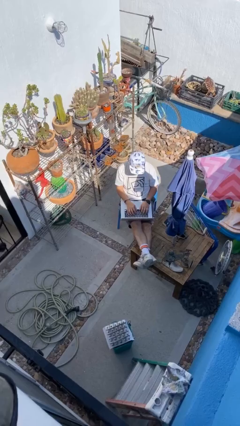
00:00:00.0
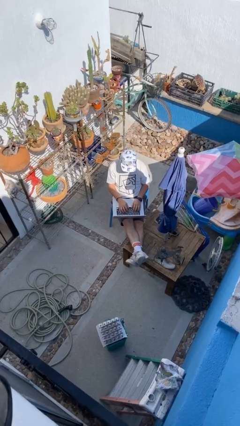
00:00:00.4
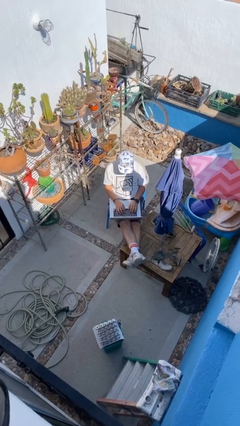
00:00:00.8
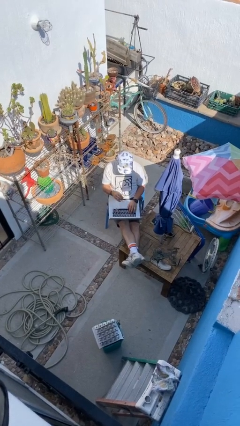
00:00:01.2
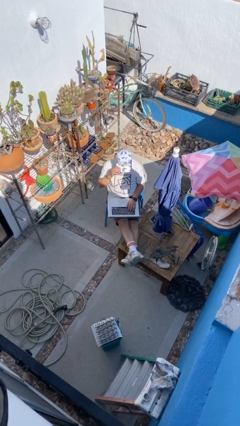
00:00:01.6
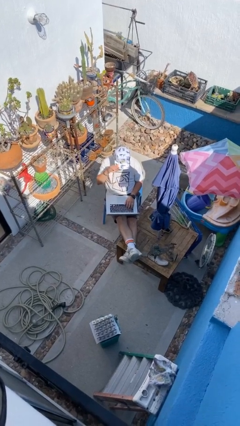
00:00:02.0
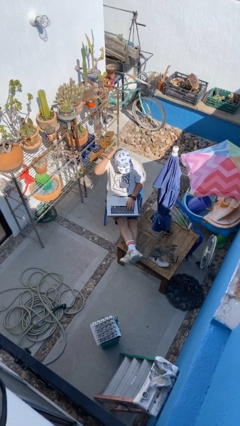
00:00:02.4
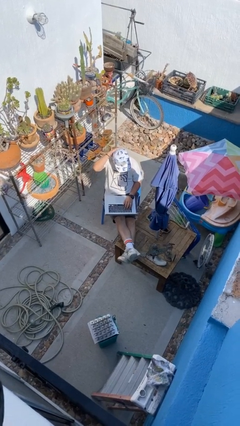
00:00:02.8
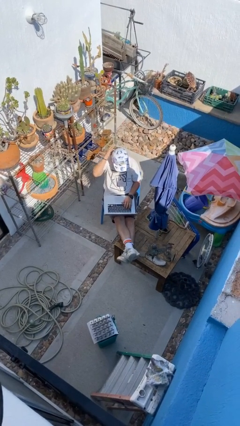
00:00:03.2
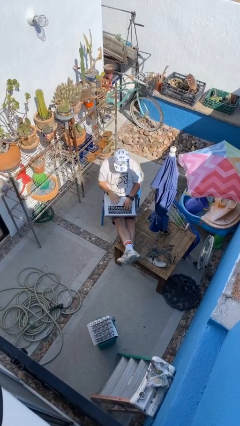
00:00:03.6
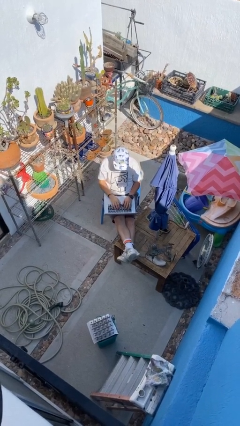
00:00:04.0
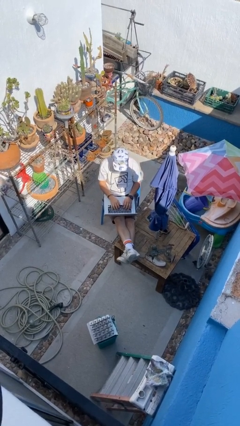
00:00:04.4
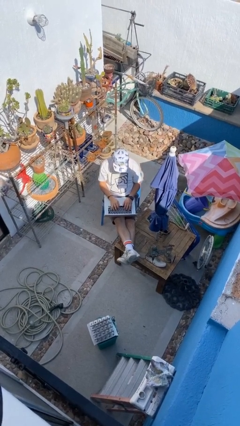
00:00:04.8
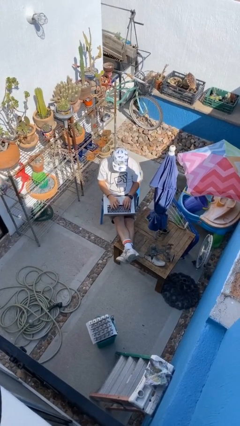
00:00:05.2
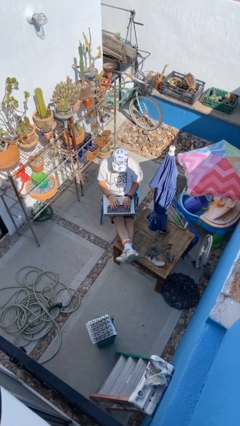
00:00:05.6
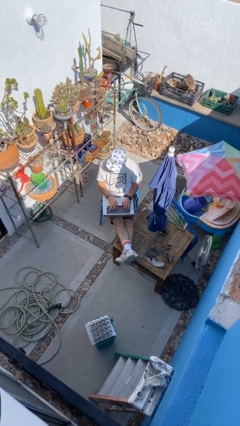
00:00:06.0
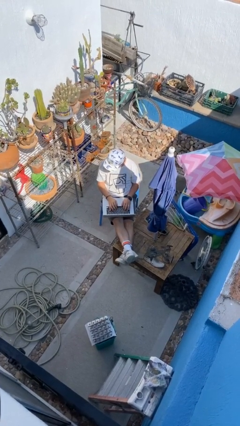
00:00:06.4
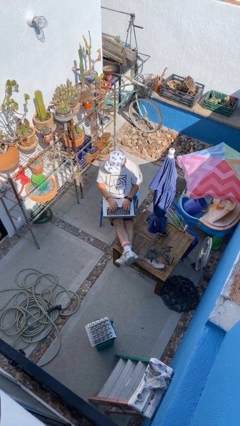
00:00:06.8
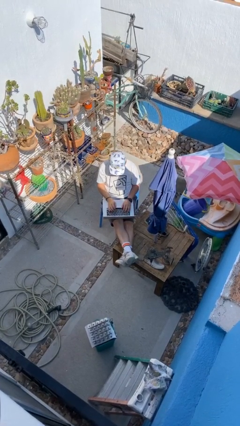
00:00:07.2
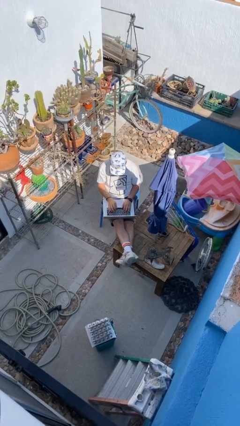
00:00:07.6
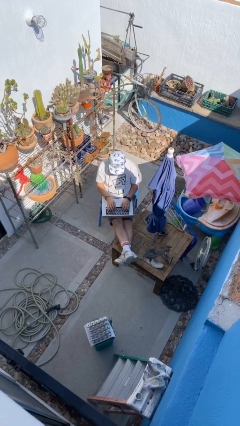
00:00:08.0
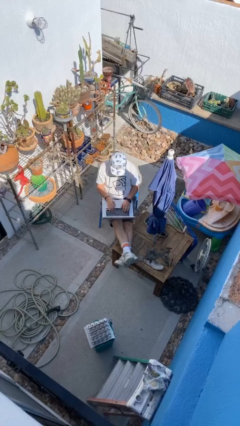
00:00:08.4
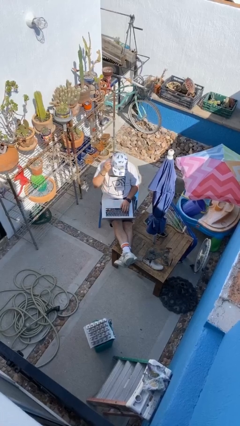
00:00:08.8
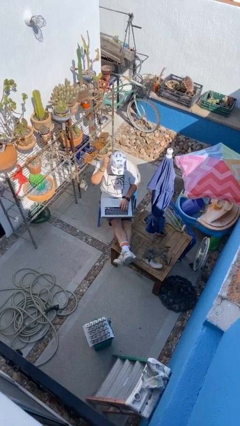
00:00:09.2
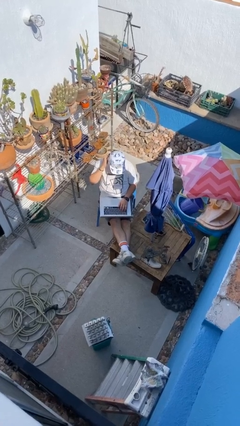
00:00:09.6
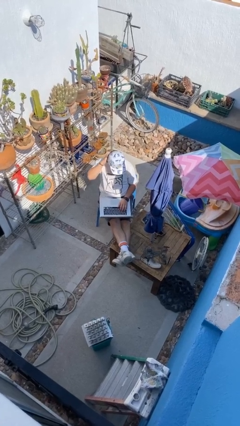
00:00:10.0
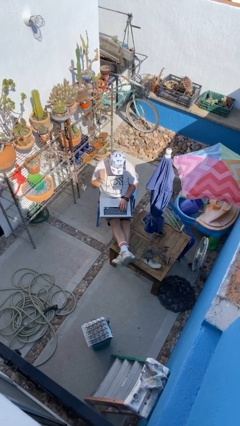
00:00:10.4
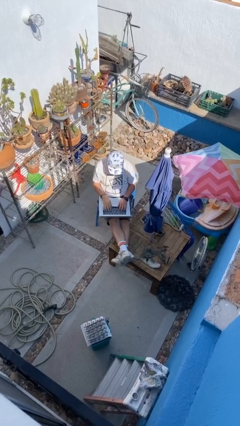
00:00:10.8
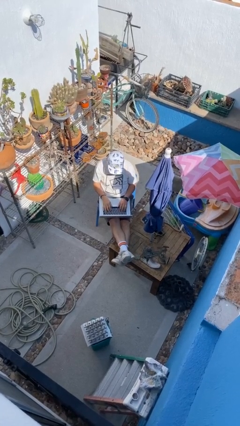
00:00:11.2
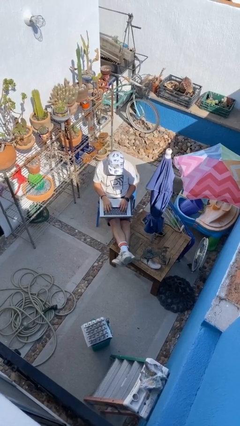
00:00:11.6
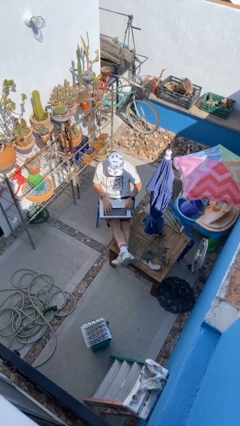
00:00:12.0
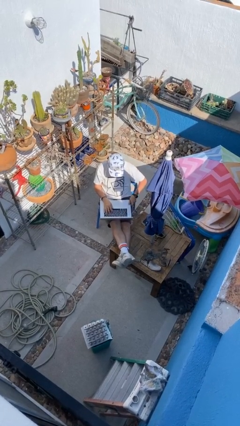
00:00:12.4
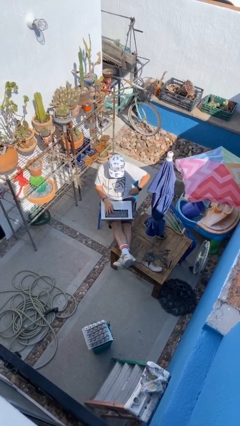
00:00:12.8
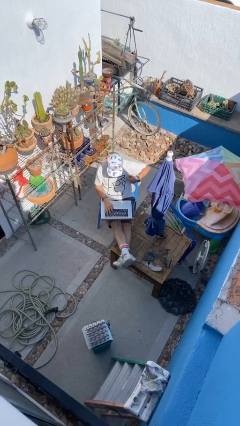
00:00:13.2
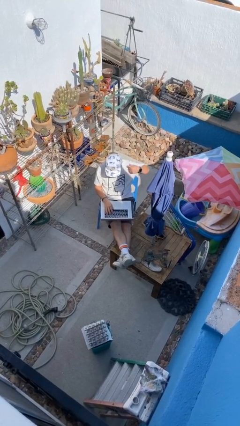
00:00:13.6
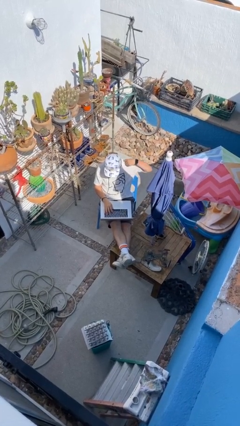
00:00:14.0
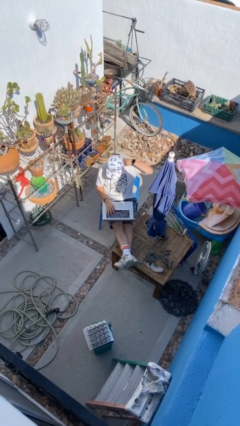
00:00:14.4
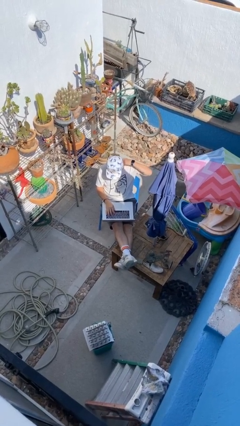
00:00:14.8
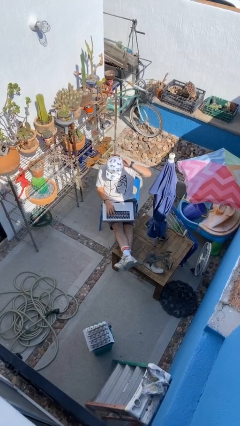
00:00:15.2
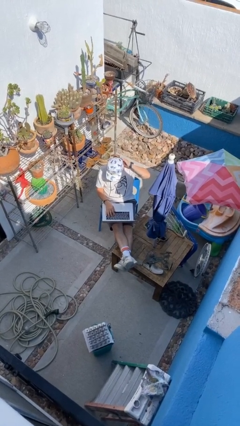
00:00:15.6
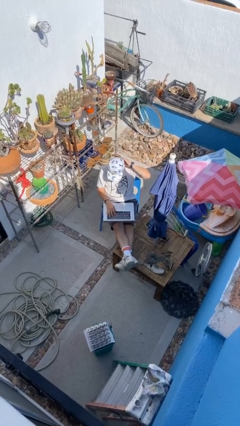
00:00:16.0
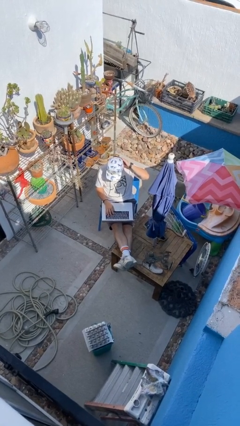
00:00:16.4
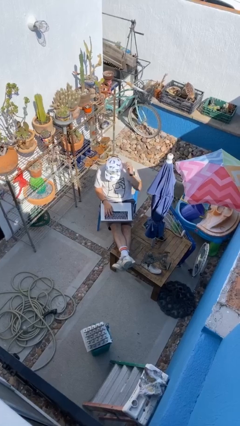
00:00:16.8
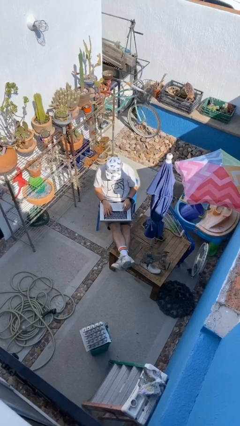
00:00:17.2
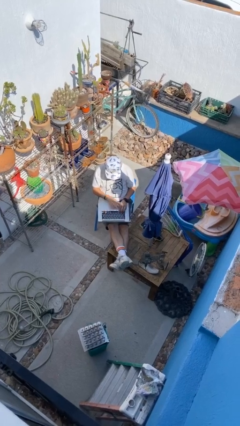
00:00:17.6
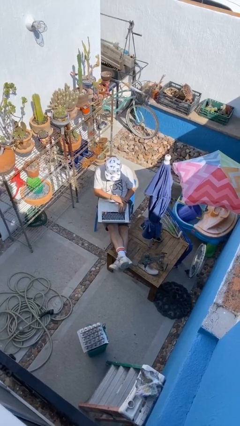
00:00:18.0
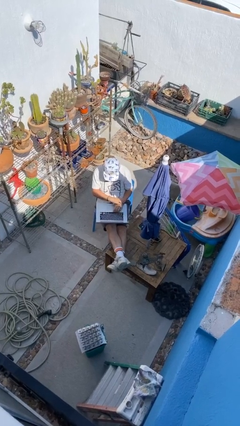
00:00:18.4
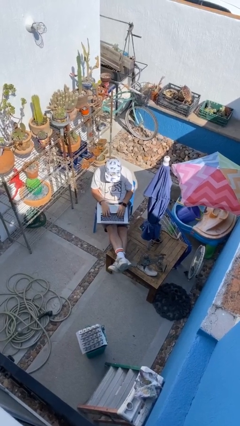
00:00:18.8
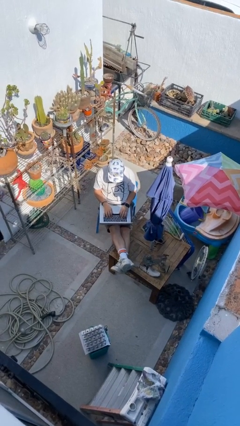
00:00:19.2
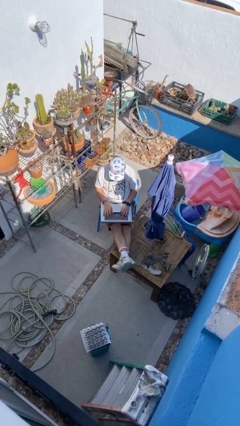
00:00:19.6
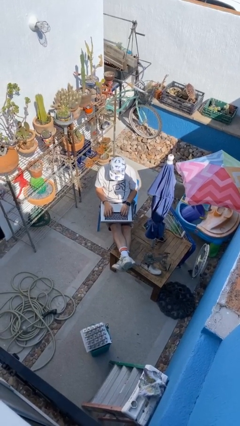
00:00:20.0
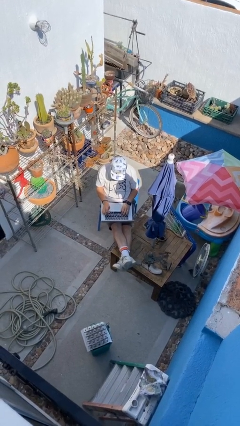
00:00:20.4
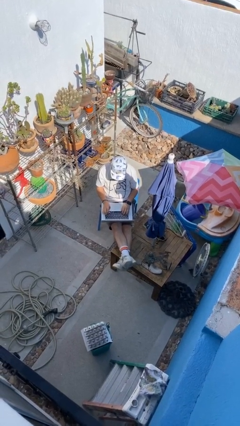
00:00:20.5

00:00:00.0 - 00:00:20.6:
person interacts with laptop

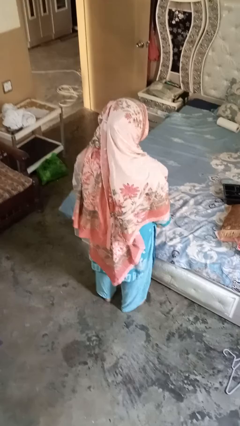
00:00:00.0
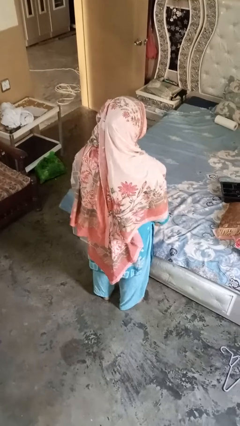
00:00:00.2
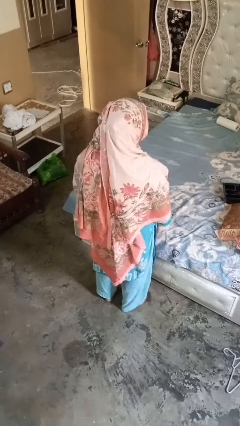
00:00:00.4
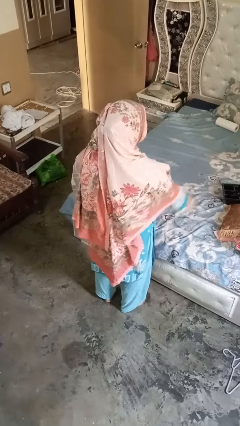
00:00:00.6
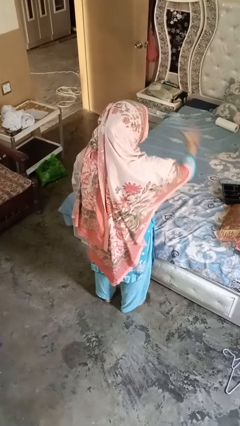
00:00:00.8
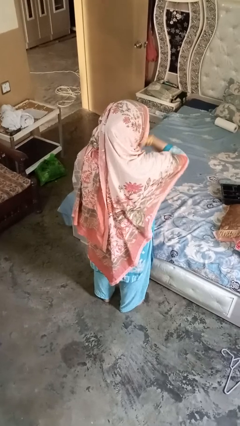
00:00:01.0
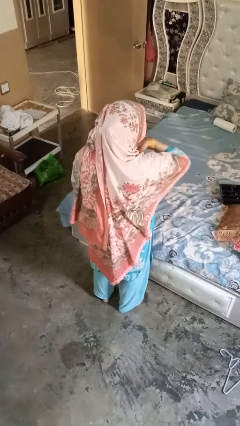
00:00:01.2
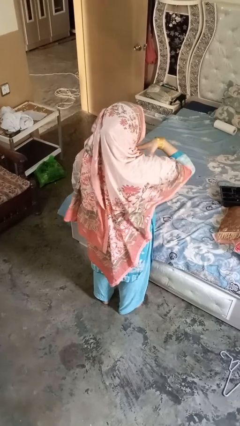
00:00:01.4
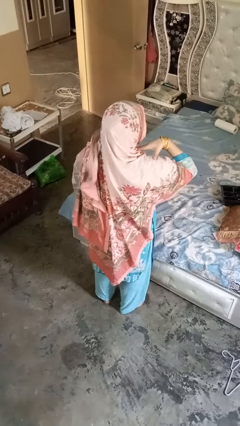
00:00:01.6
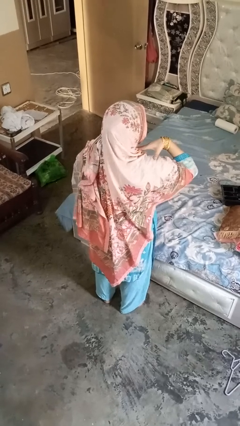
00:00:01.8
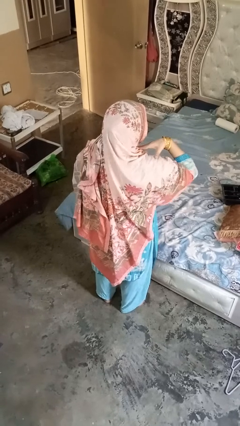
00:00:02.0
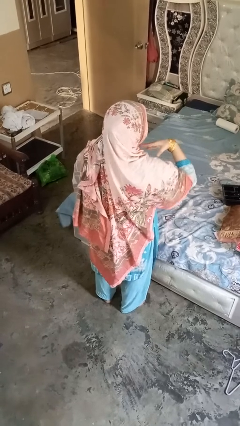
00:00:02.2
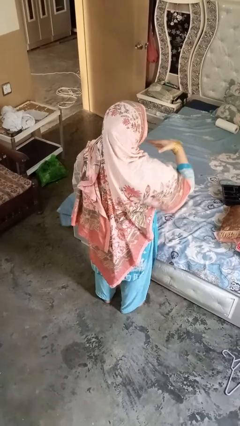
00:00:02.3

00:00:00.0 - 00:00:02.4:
person gestures cut

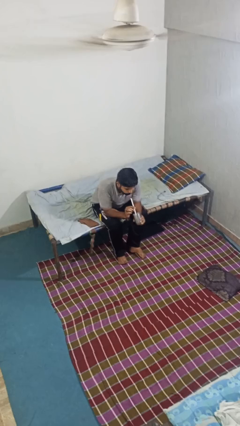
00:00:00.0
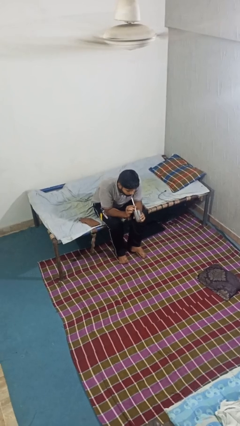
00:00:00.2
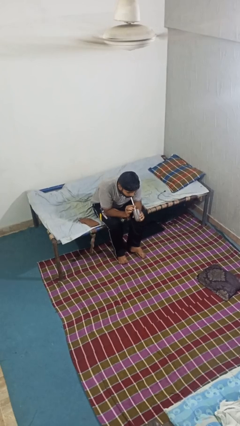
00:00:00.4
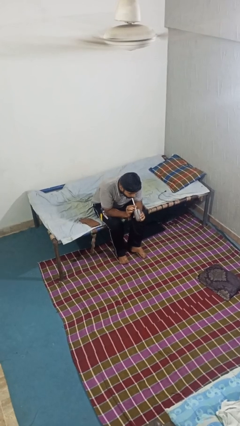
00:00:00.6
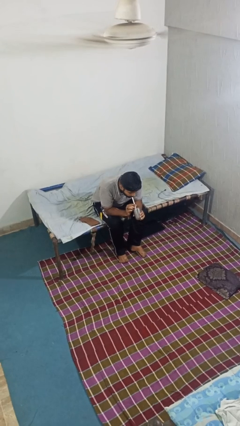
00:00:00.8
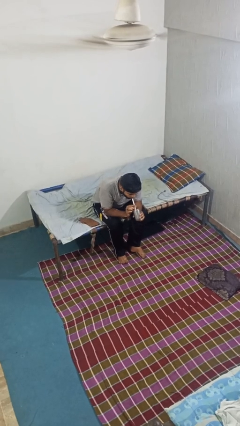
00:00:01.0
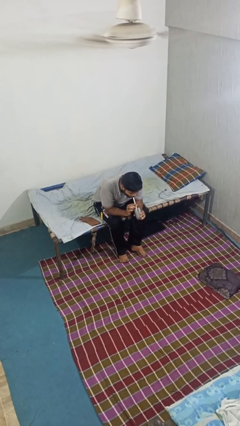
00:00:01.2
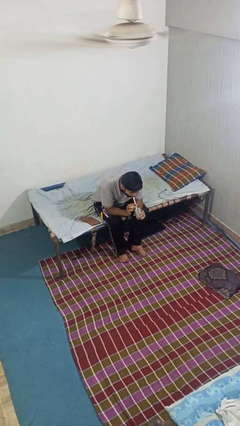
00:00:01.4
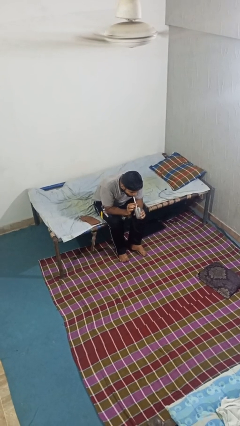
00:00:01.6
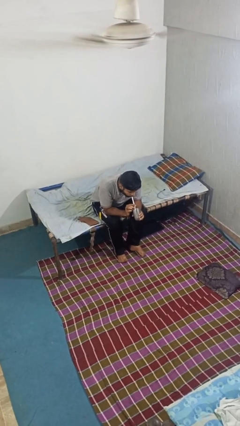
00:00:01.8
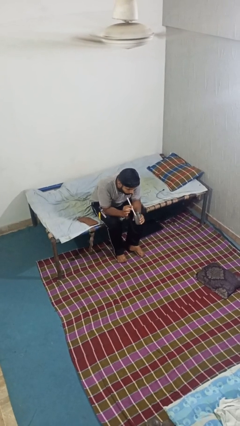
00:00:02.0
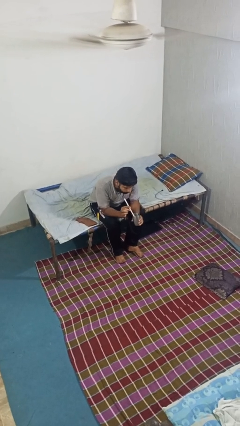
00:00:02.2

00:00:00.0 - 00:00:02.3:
person drinks from straw

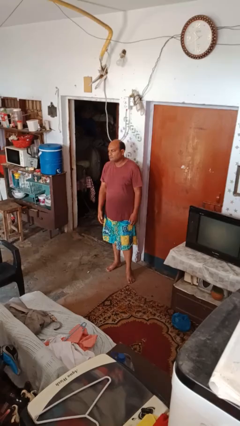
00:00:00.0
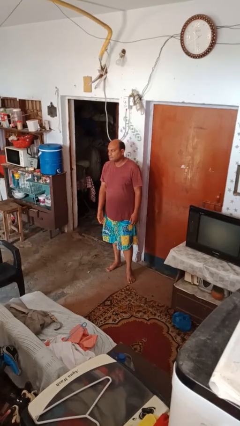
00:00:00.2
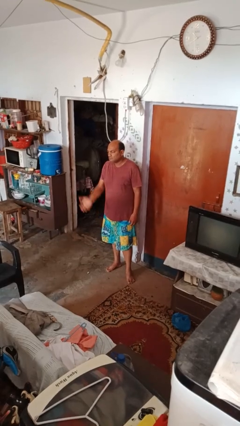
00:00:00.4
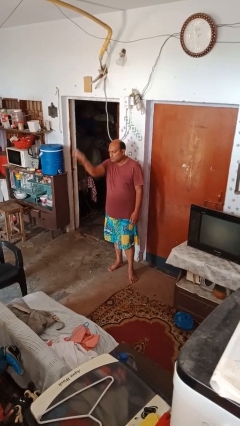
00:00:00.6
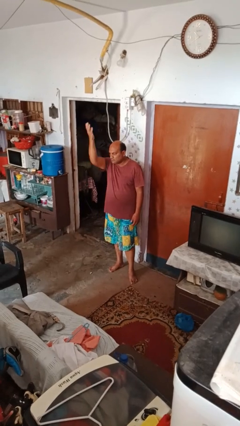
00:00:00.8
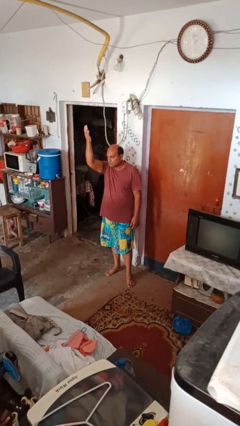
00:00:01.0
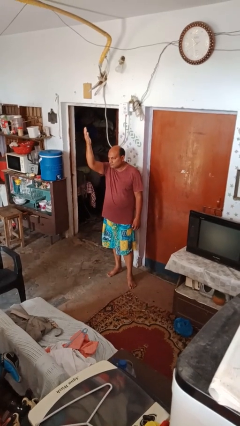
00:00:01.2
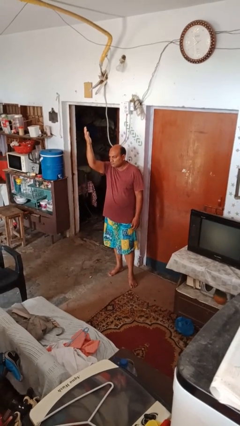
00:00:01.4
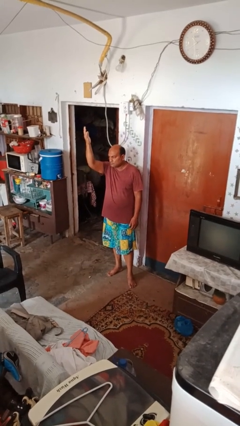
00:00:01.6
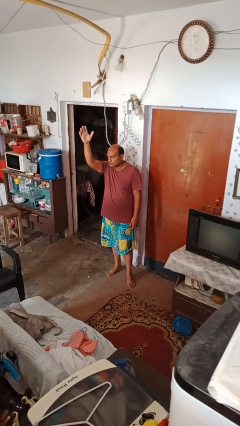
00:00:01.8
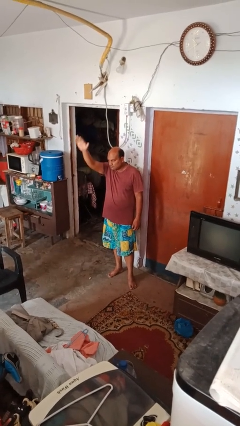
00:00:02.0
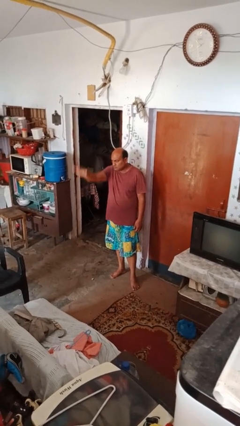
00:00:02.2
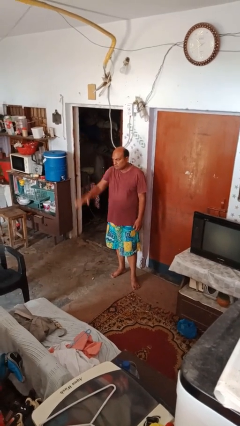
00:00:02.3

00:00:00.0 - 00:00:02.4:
person gestures raise hand

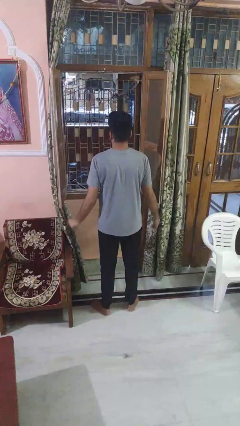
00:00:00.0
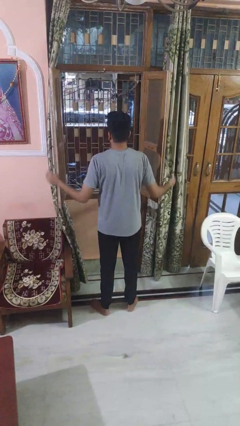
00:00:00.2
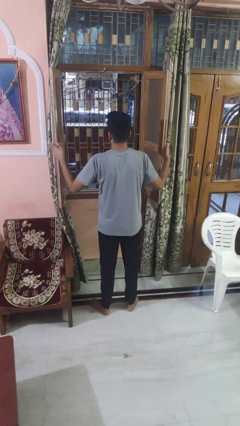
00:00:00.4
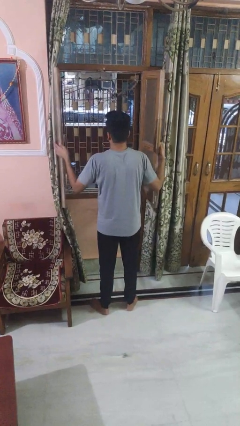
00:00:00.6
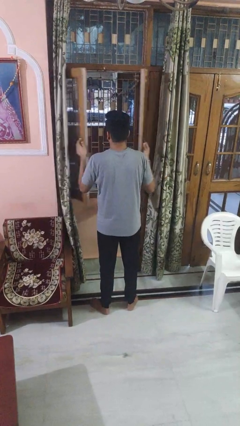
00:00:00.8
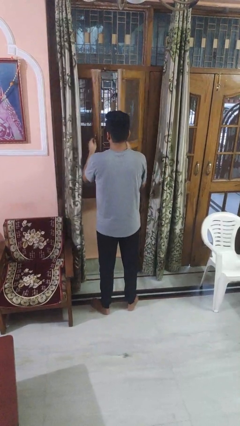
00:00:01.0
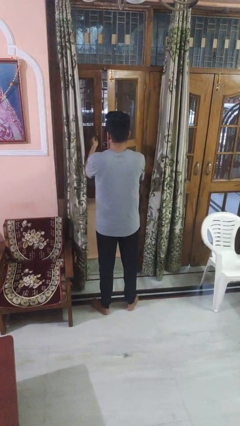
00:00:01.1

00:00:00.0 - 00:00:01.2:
person closes home window
